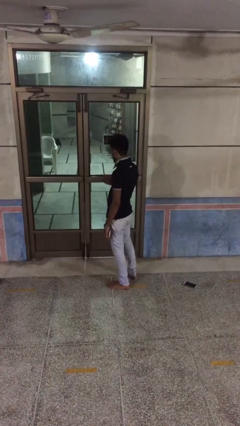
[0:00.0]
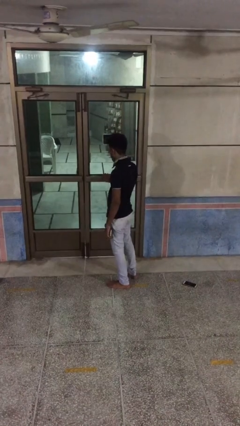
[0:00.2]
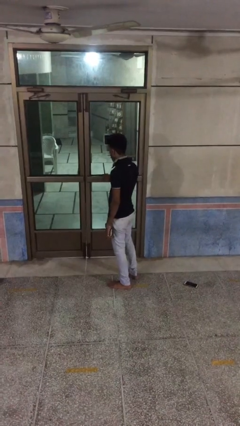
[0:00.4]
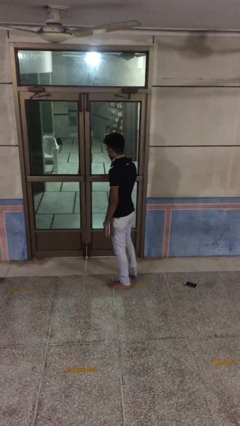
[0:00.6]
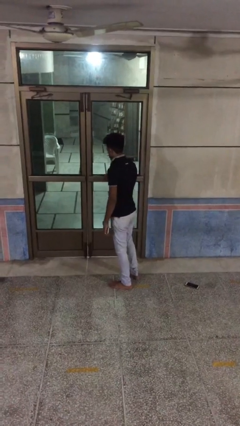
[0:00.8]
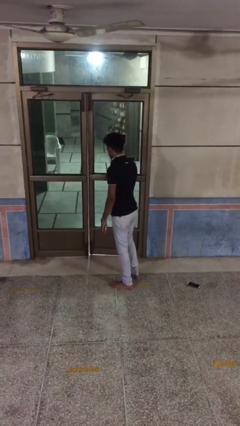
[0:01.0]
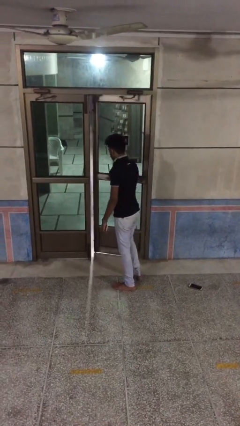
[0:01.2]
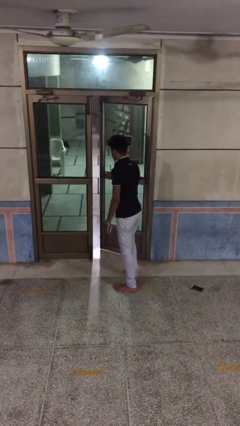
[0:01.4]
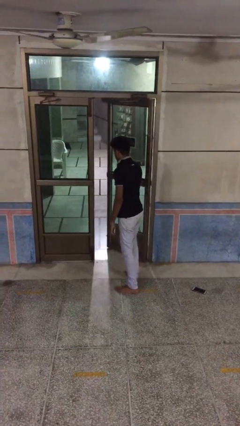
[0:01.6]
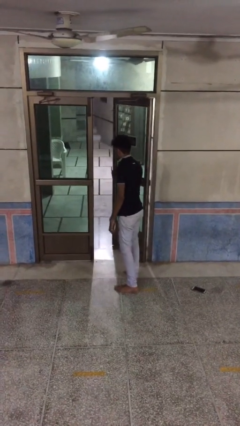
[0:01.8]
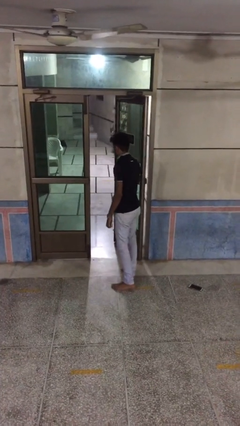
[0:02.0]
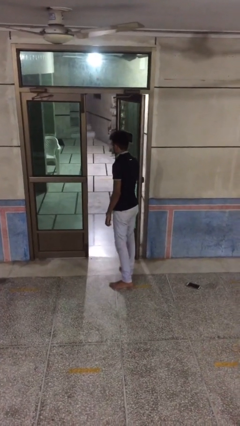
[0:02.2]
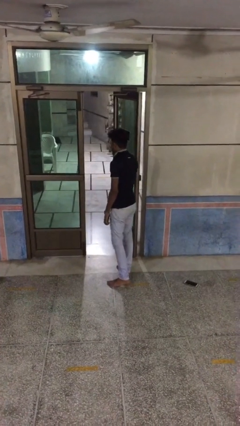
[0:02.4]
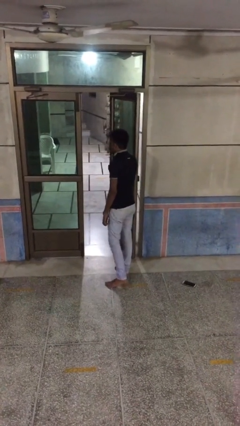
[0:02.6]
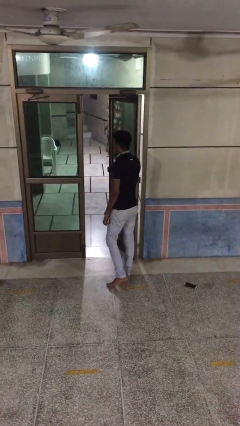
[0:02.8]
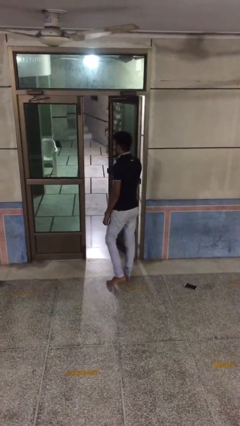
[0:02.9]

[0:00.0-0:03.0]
person opens facility door

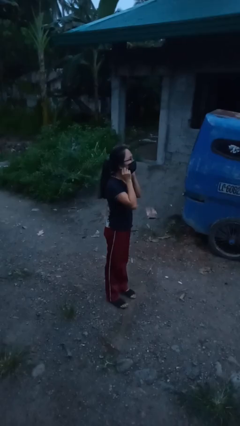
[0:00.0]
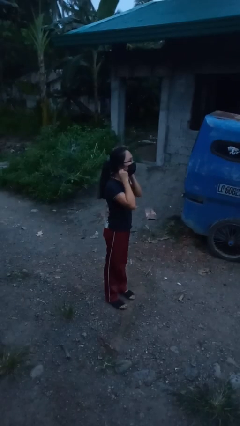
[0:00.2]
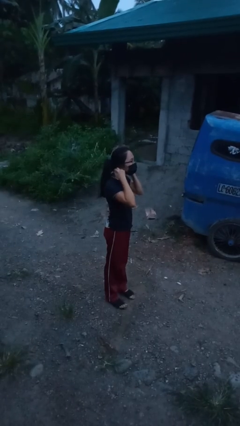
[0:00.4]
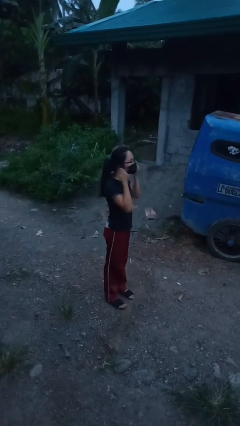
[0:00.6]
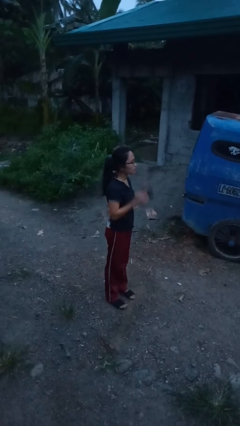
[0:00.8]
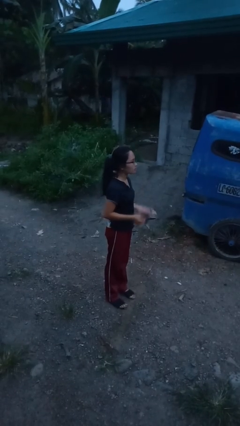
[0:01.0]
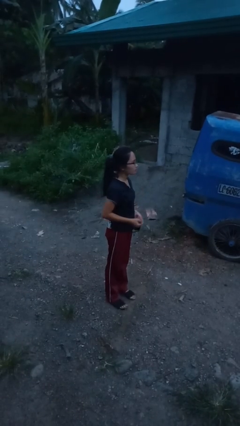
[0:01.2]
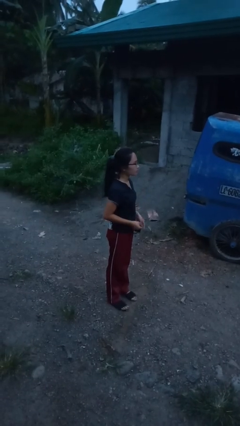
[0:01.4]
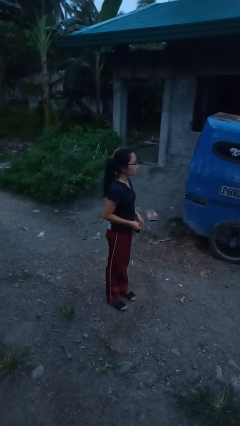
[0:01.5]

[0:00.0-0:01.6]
person takes off facemask

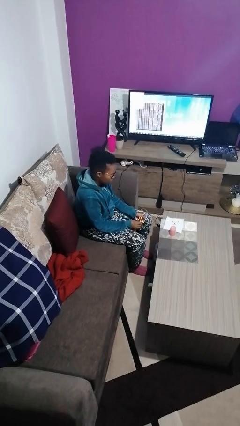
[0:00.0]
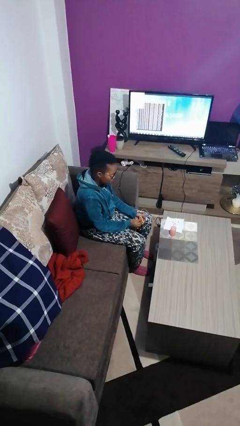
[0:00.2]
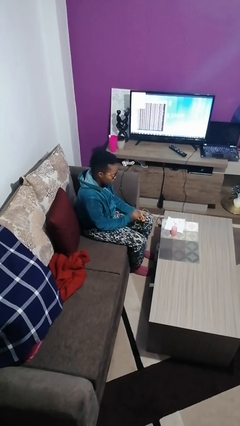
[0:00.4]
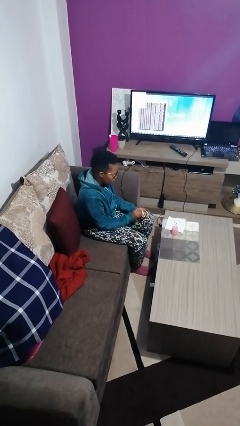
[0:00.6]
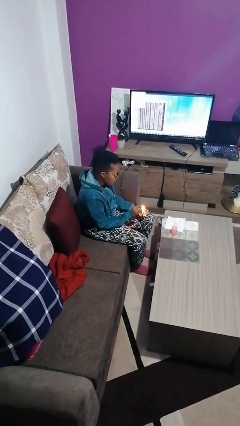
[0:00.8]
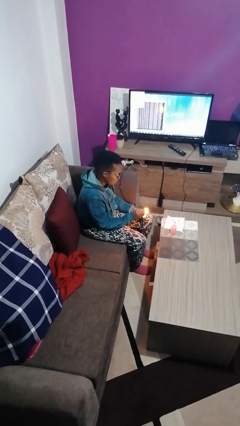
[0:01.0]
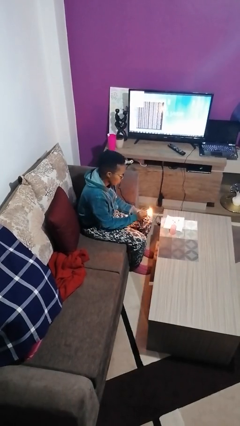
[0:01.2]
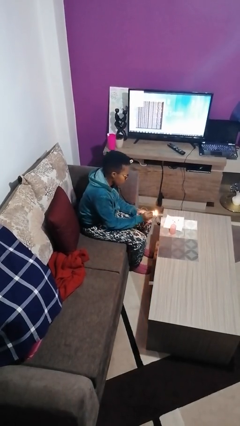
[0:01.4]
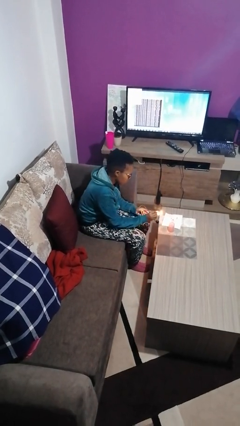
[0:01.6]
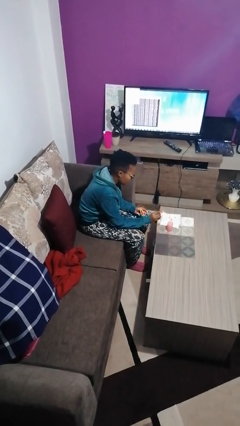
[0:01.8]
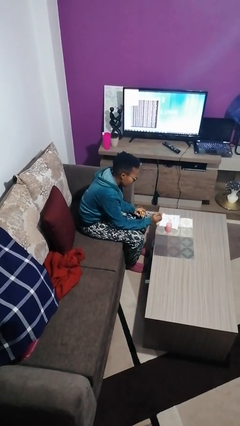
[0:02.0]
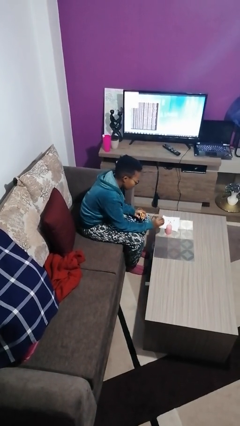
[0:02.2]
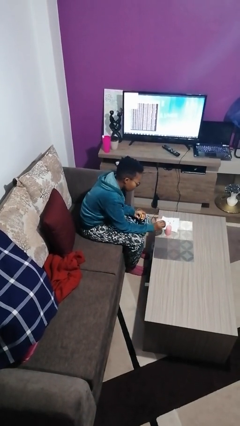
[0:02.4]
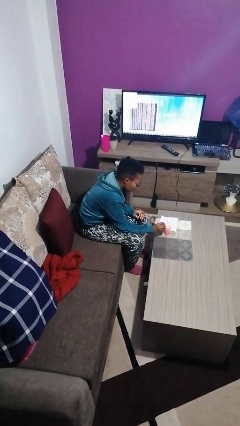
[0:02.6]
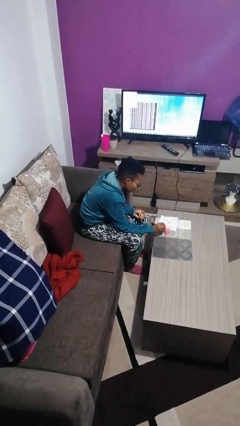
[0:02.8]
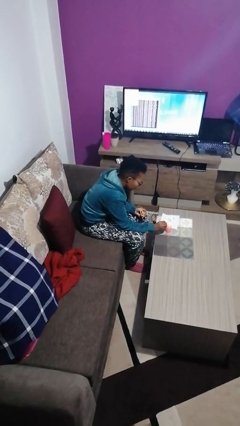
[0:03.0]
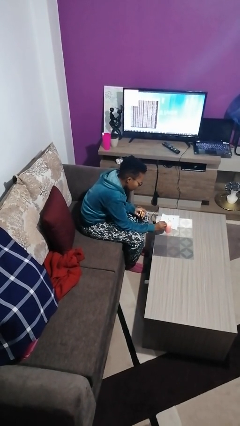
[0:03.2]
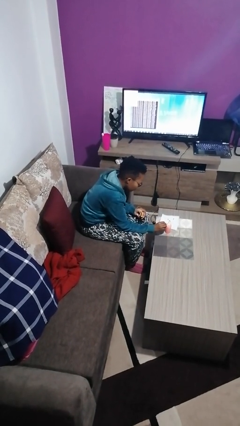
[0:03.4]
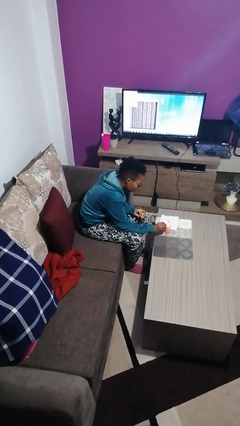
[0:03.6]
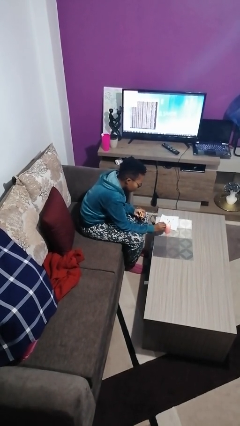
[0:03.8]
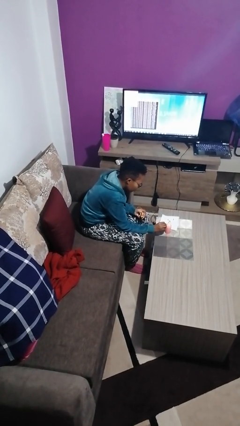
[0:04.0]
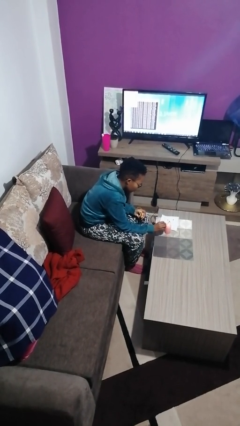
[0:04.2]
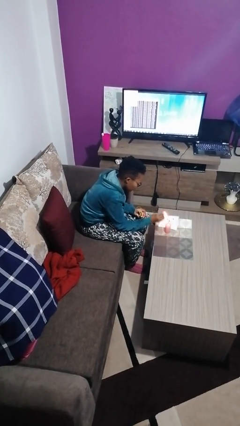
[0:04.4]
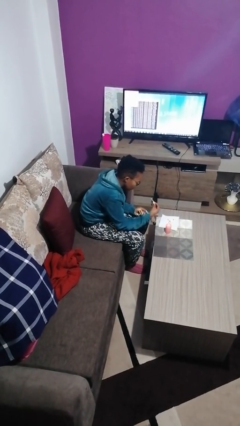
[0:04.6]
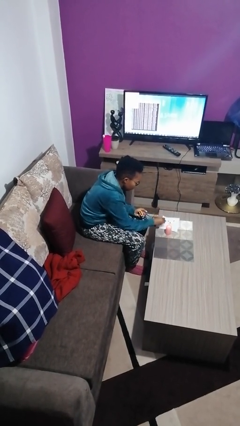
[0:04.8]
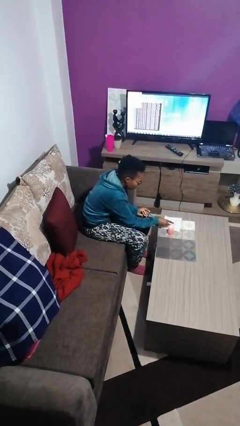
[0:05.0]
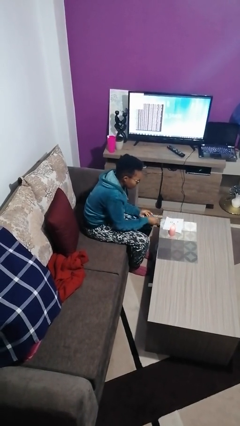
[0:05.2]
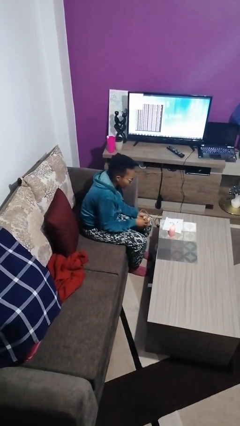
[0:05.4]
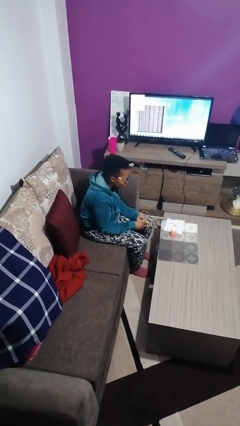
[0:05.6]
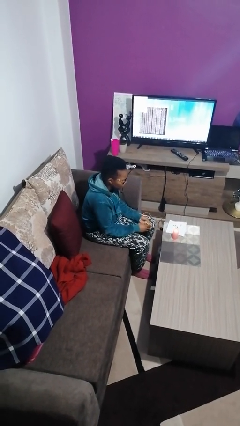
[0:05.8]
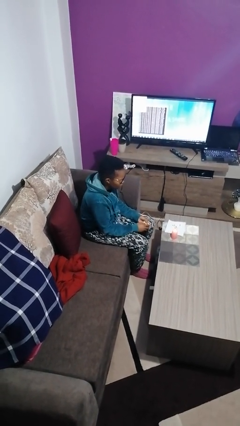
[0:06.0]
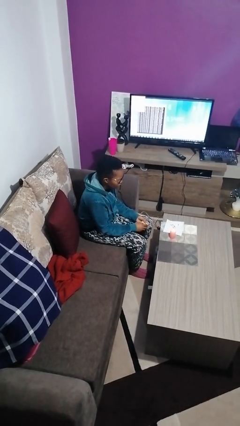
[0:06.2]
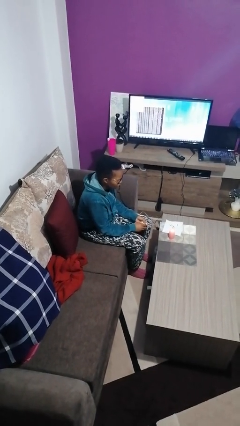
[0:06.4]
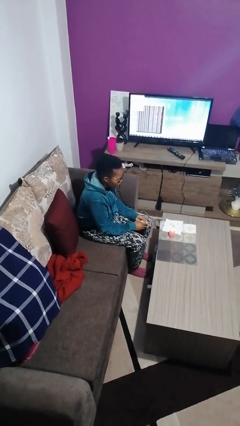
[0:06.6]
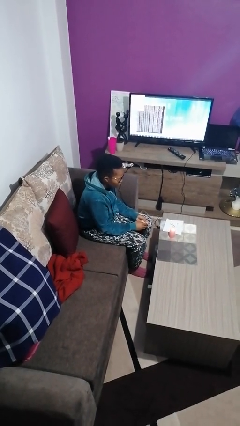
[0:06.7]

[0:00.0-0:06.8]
person lights candle

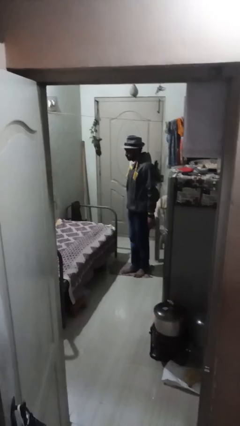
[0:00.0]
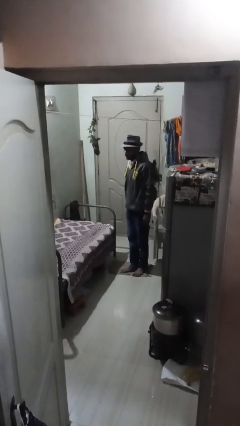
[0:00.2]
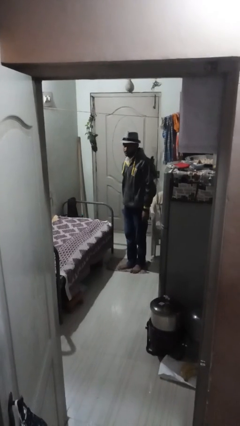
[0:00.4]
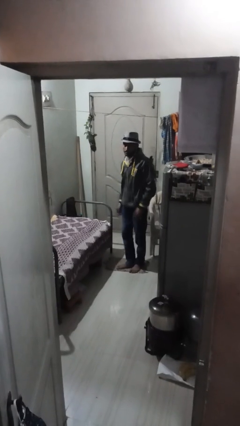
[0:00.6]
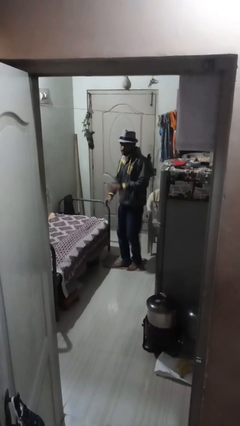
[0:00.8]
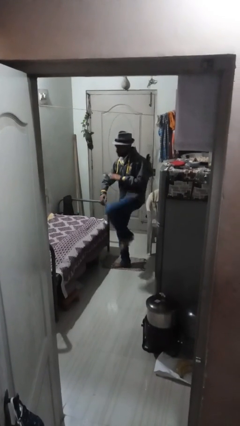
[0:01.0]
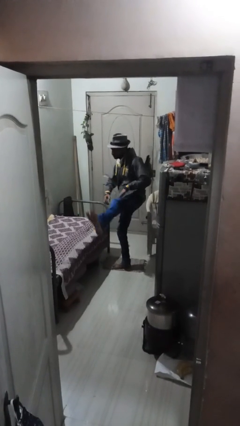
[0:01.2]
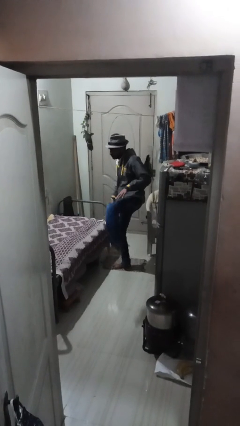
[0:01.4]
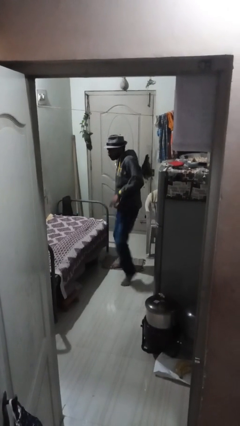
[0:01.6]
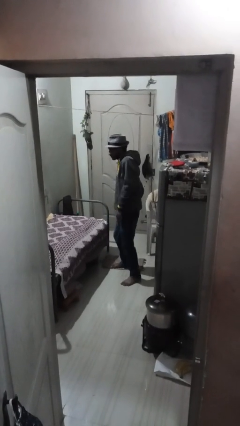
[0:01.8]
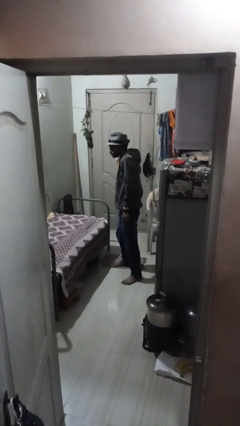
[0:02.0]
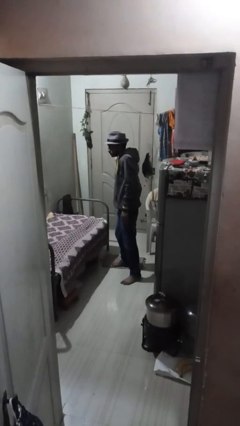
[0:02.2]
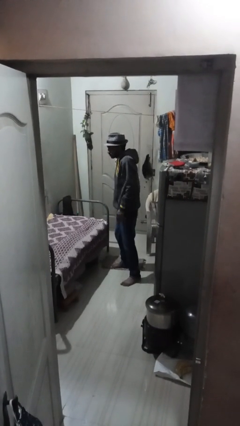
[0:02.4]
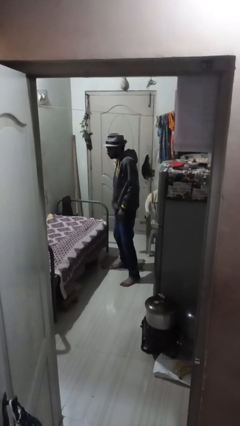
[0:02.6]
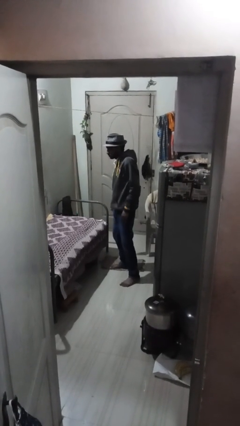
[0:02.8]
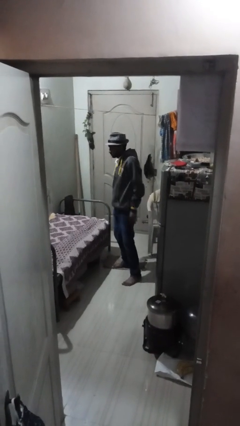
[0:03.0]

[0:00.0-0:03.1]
person karate kicks

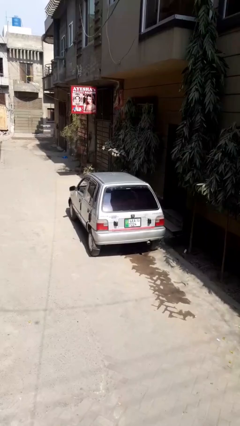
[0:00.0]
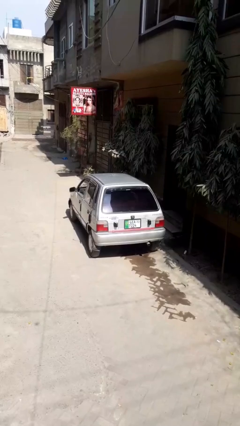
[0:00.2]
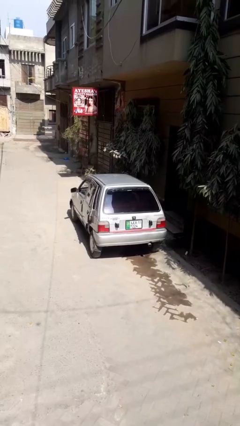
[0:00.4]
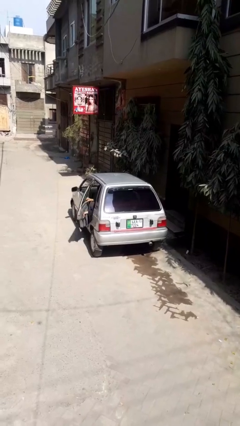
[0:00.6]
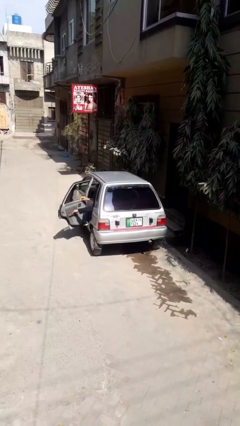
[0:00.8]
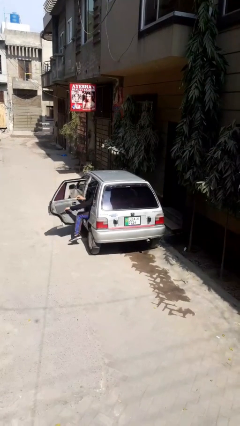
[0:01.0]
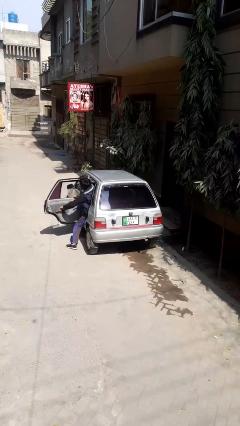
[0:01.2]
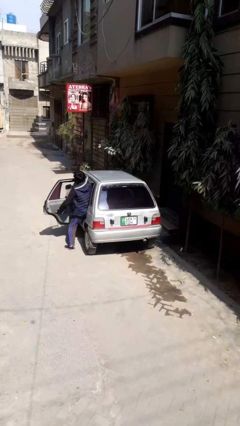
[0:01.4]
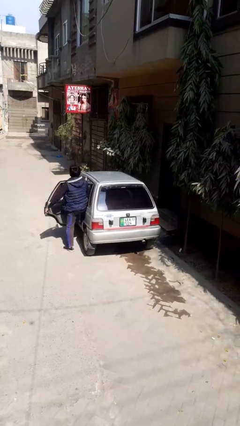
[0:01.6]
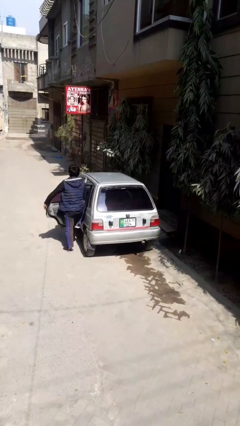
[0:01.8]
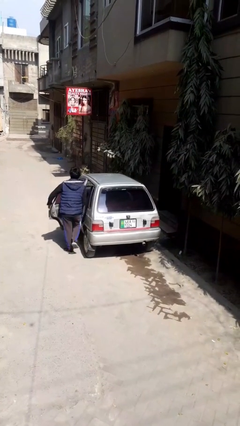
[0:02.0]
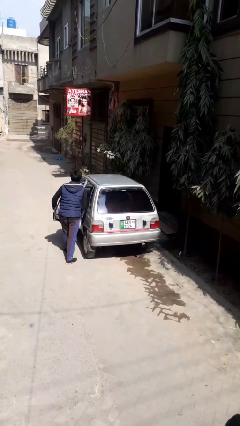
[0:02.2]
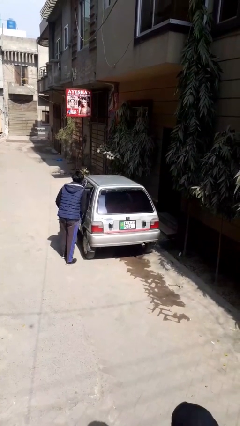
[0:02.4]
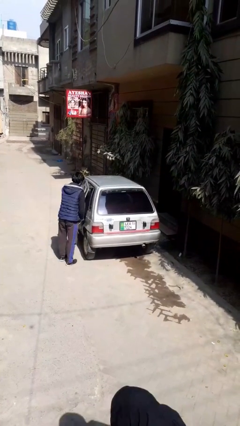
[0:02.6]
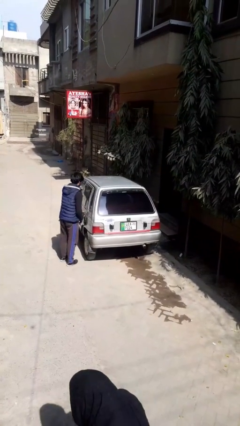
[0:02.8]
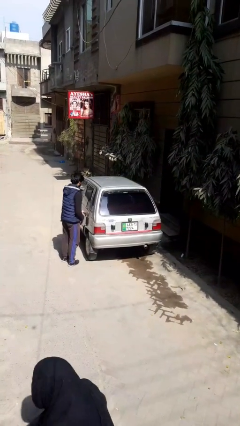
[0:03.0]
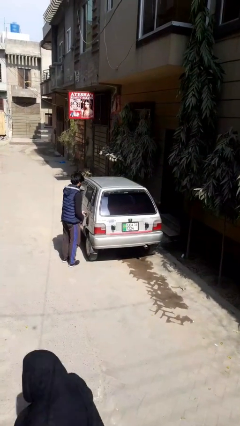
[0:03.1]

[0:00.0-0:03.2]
car drops off person

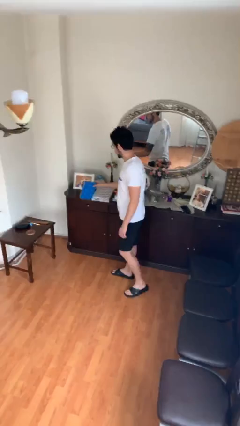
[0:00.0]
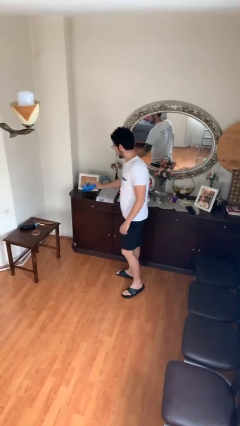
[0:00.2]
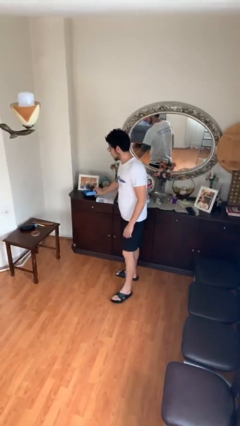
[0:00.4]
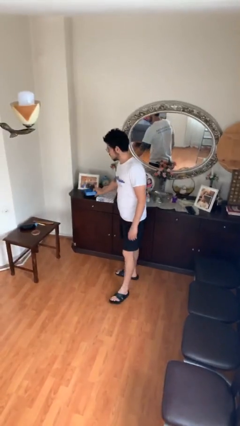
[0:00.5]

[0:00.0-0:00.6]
person puts down object on table
